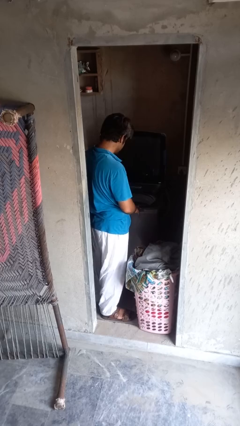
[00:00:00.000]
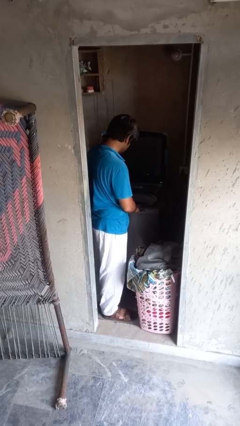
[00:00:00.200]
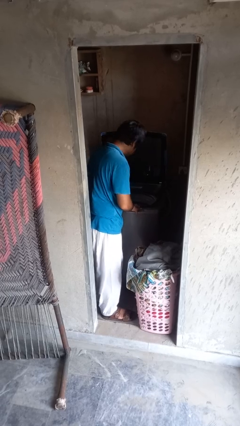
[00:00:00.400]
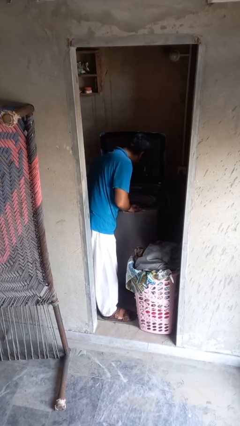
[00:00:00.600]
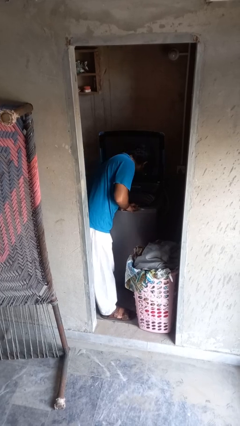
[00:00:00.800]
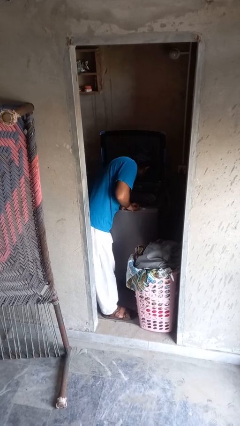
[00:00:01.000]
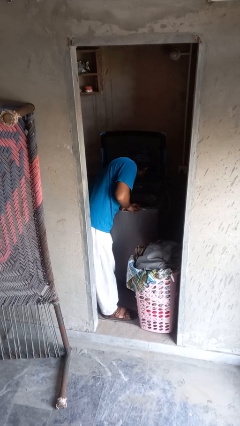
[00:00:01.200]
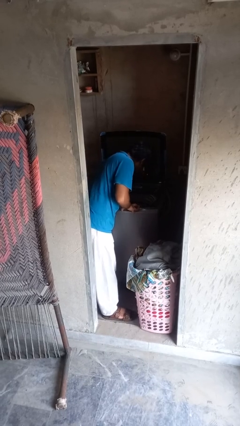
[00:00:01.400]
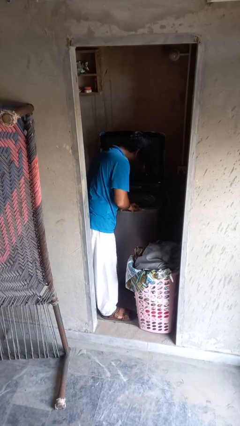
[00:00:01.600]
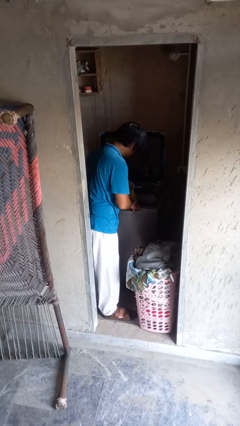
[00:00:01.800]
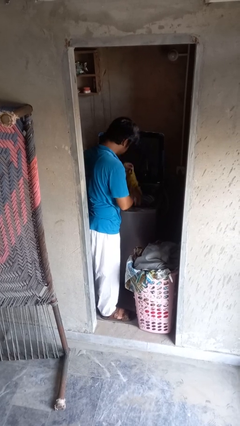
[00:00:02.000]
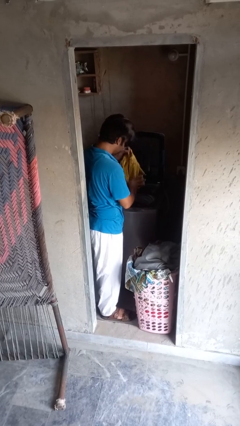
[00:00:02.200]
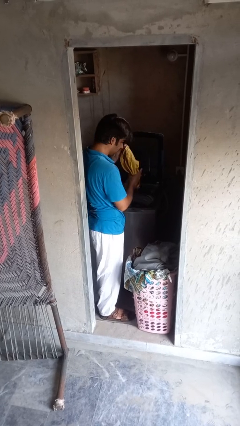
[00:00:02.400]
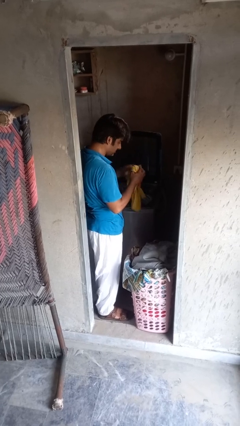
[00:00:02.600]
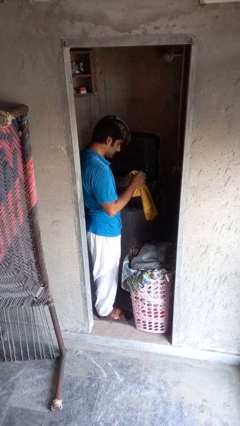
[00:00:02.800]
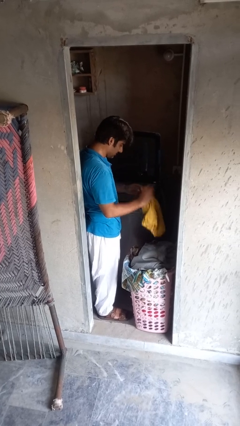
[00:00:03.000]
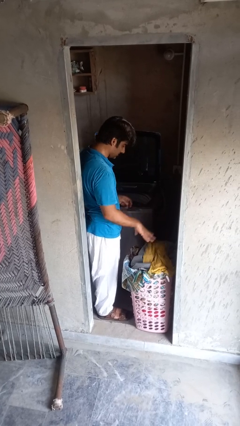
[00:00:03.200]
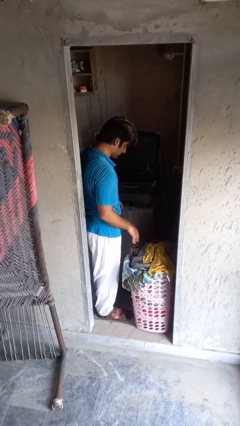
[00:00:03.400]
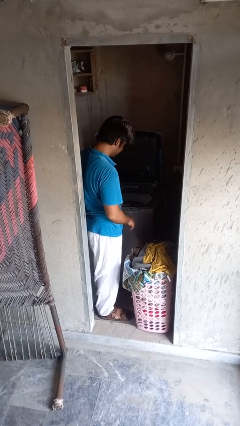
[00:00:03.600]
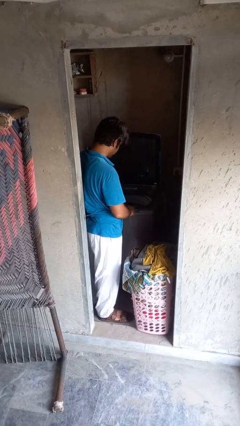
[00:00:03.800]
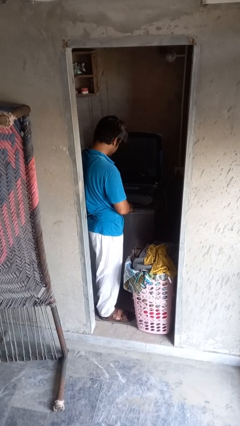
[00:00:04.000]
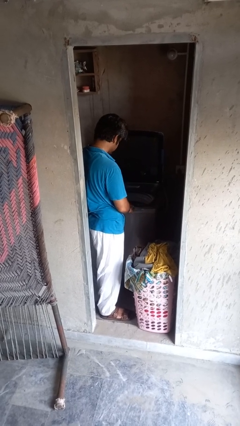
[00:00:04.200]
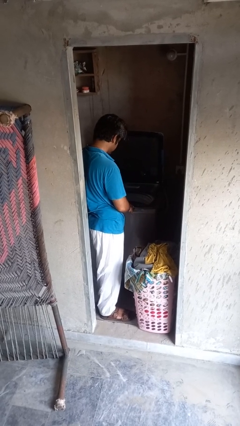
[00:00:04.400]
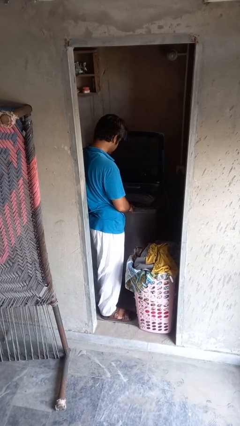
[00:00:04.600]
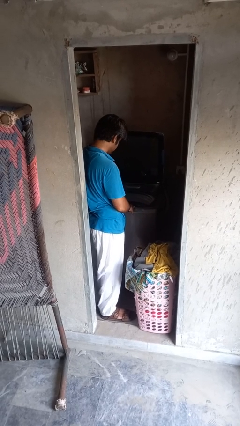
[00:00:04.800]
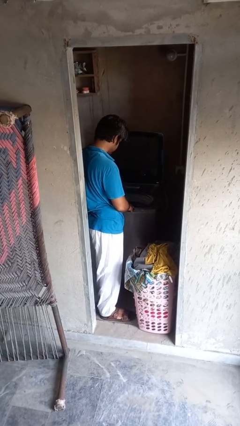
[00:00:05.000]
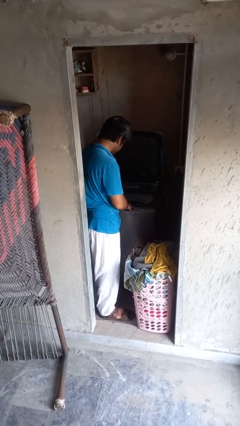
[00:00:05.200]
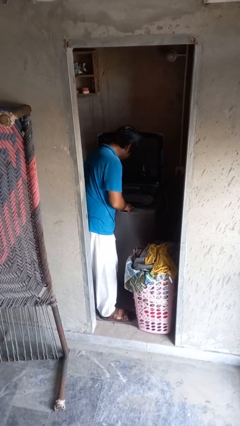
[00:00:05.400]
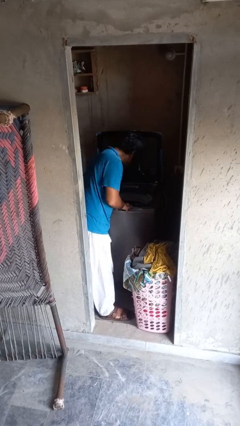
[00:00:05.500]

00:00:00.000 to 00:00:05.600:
person loads clotheswasher

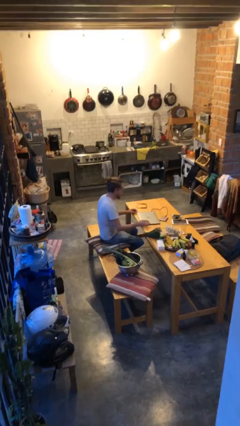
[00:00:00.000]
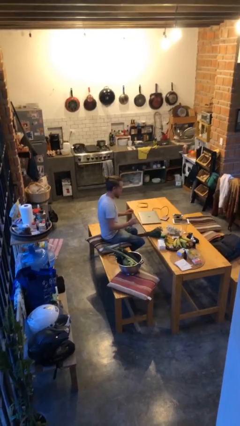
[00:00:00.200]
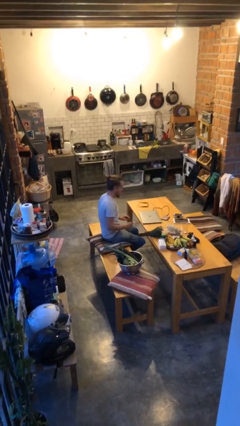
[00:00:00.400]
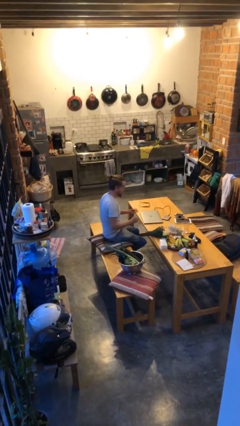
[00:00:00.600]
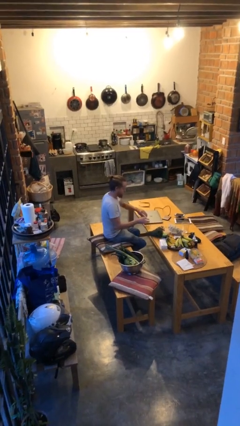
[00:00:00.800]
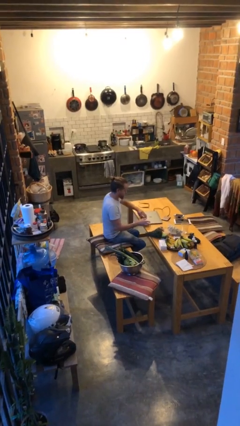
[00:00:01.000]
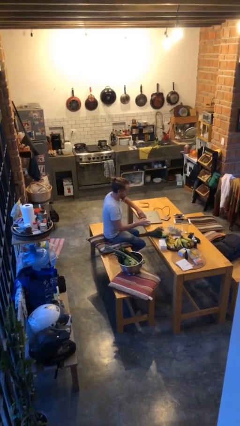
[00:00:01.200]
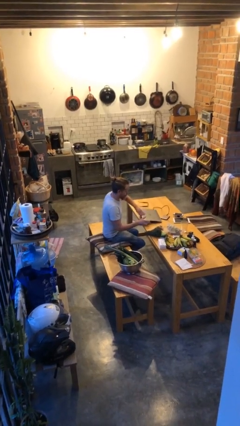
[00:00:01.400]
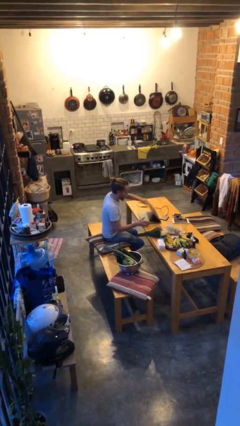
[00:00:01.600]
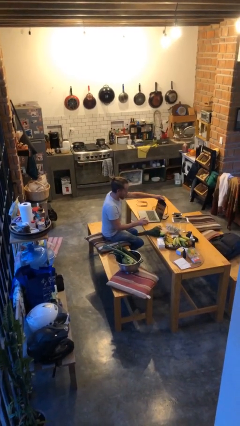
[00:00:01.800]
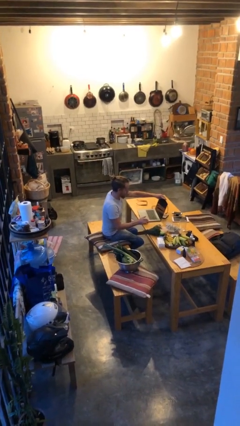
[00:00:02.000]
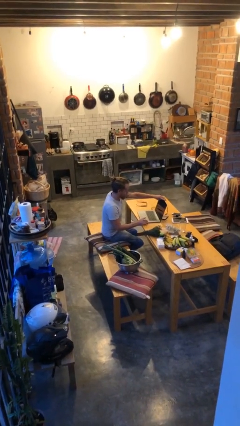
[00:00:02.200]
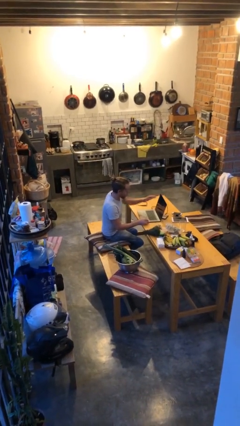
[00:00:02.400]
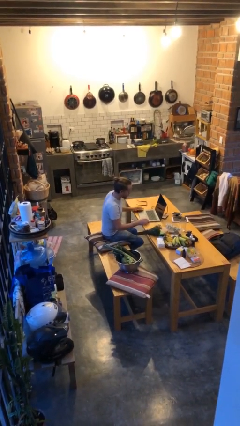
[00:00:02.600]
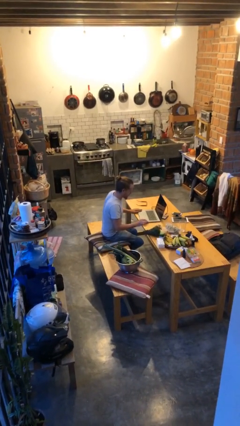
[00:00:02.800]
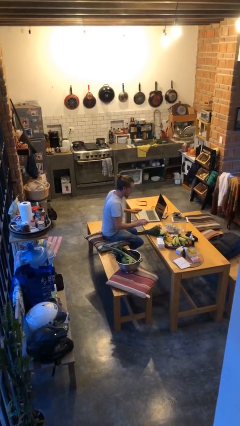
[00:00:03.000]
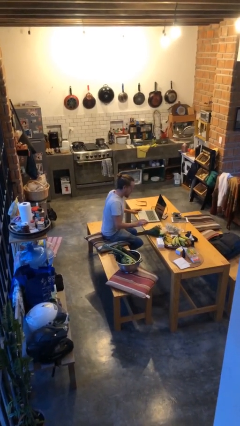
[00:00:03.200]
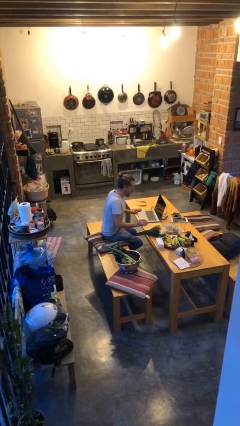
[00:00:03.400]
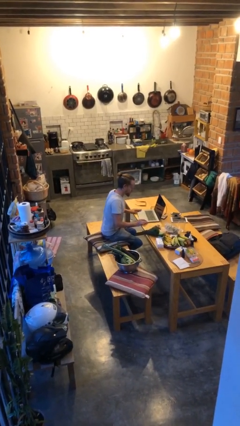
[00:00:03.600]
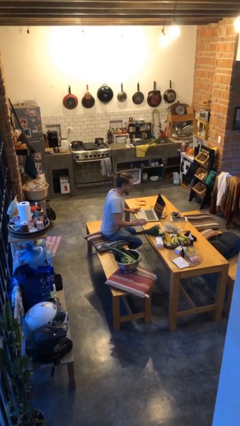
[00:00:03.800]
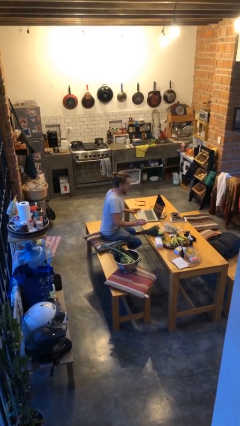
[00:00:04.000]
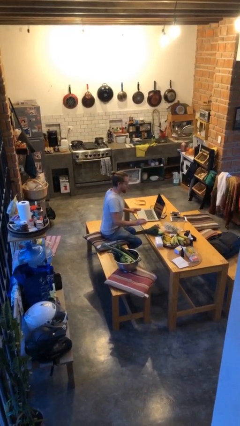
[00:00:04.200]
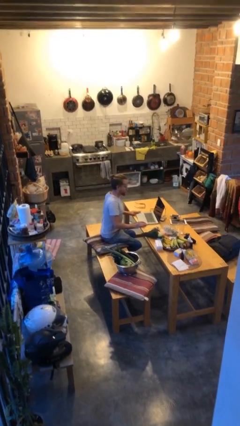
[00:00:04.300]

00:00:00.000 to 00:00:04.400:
person opens laptop

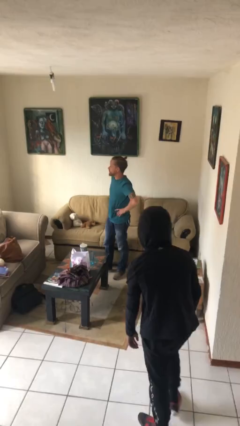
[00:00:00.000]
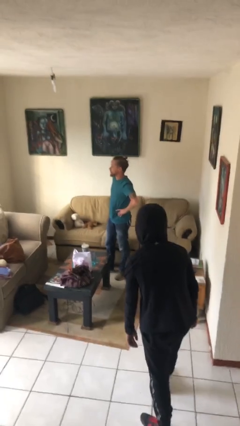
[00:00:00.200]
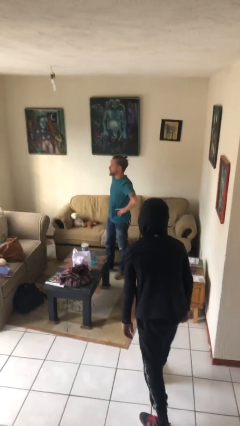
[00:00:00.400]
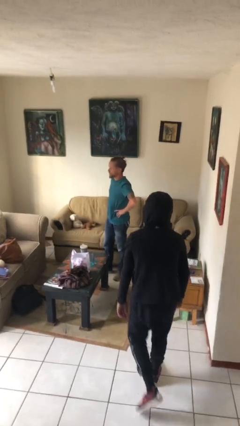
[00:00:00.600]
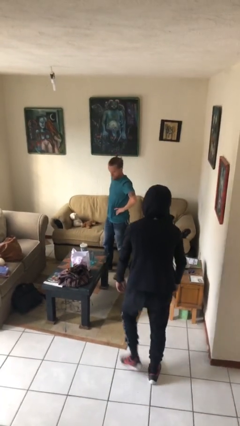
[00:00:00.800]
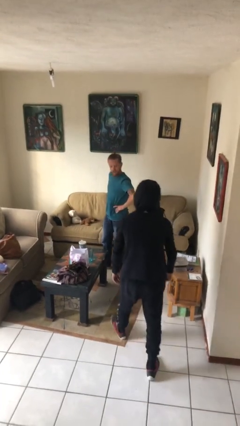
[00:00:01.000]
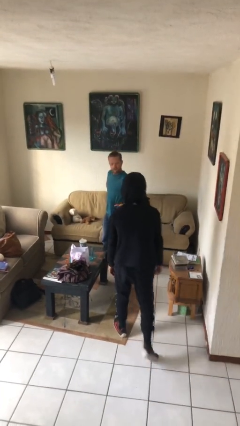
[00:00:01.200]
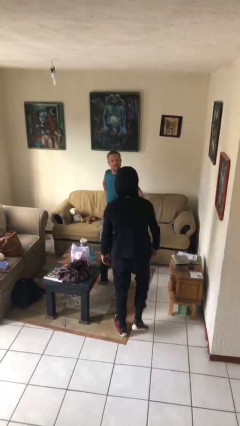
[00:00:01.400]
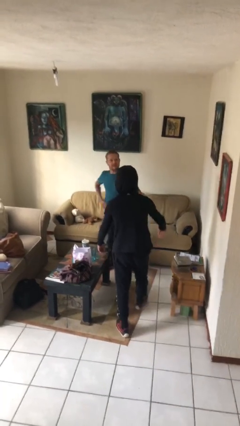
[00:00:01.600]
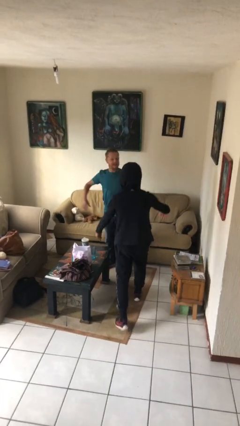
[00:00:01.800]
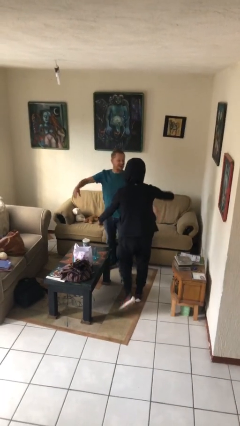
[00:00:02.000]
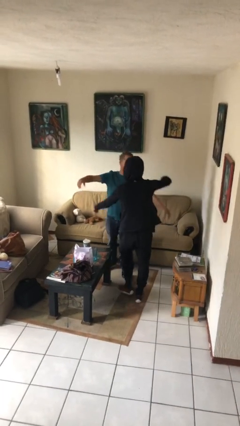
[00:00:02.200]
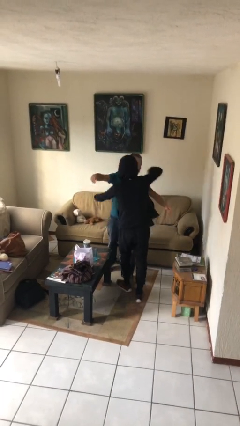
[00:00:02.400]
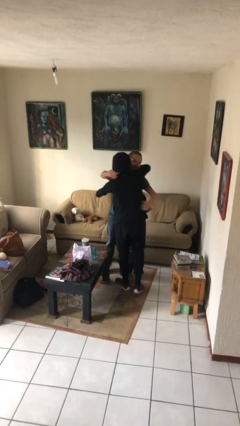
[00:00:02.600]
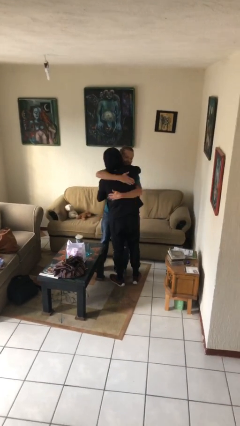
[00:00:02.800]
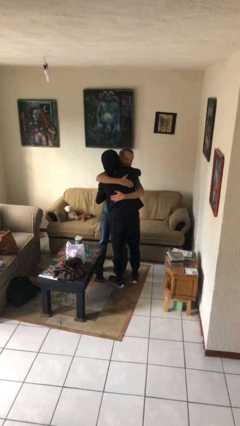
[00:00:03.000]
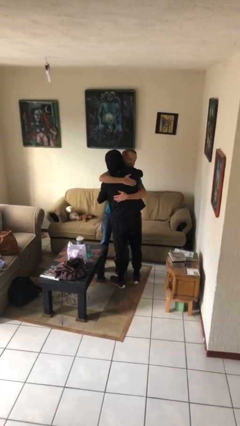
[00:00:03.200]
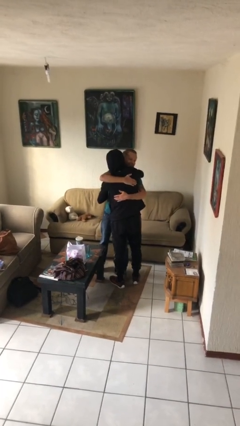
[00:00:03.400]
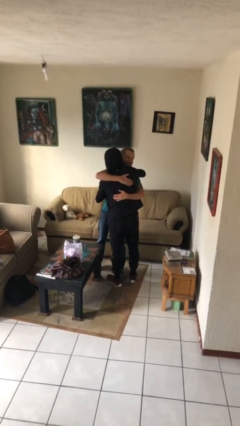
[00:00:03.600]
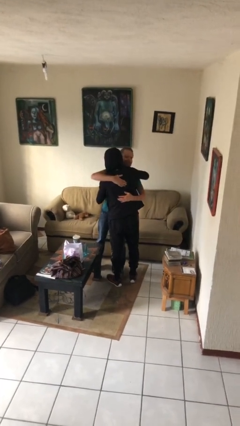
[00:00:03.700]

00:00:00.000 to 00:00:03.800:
person embraces person

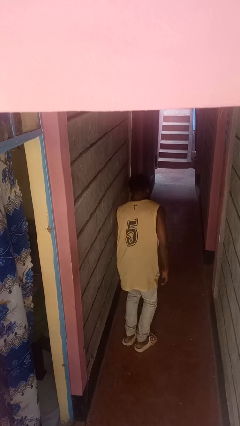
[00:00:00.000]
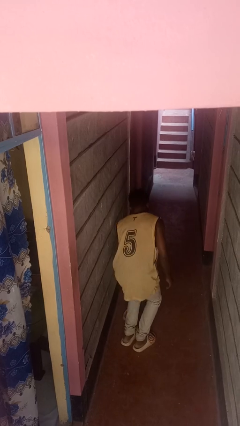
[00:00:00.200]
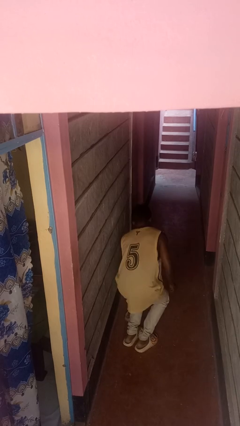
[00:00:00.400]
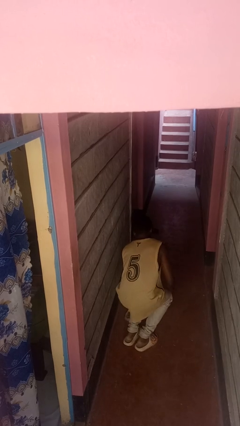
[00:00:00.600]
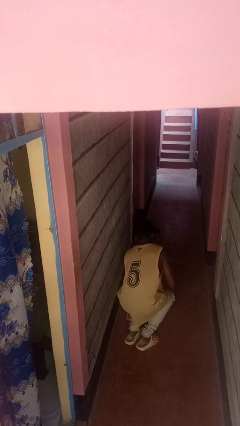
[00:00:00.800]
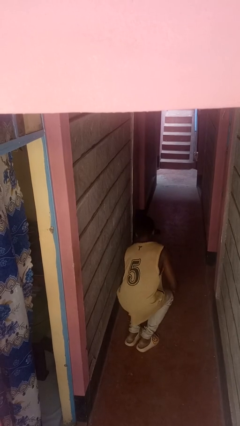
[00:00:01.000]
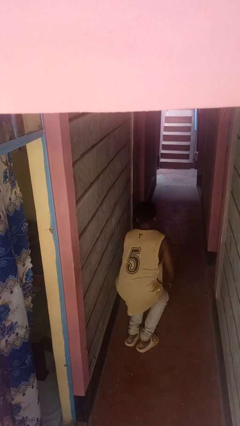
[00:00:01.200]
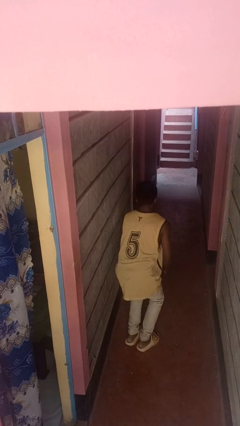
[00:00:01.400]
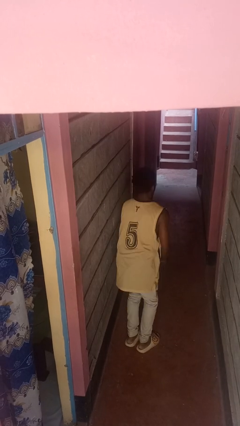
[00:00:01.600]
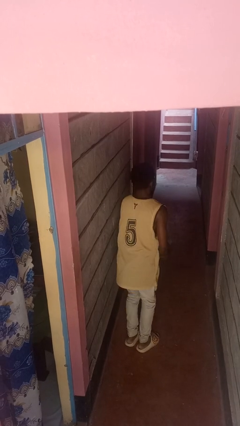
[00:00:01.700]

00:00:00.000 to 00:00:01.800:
person picks up object from floor

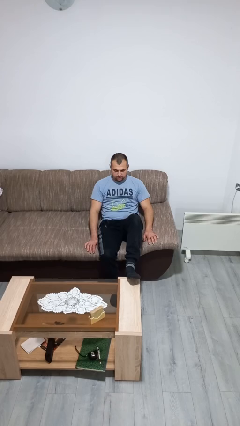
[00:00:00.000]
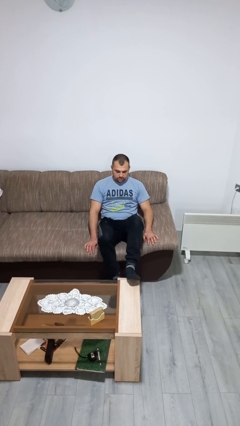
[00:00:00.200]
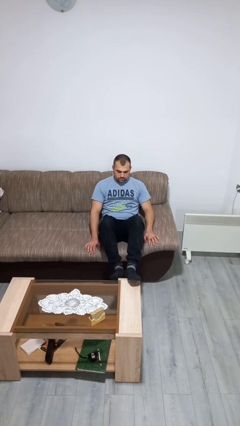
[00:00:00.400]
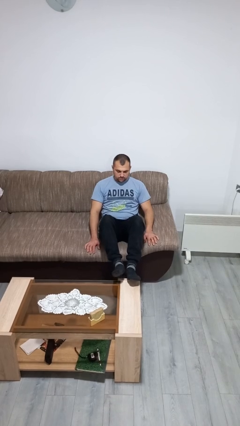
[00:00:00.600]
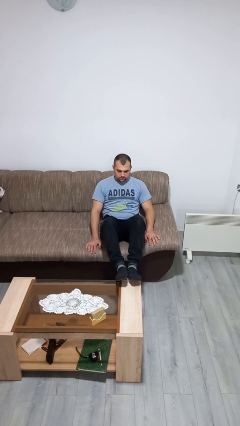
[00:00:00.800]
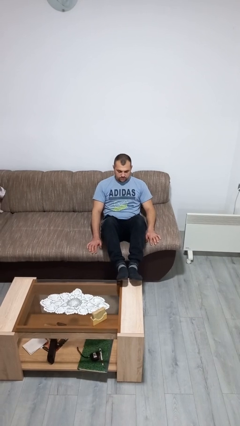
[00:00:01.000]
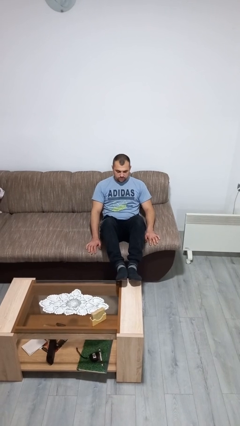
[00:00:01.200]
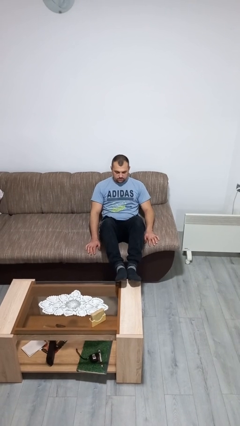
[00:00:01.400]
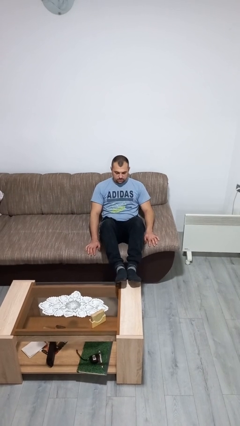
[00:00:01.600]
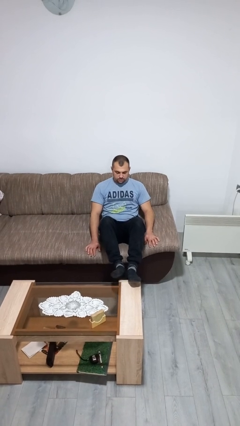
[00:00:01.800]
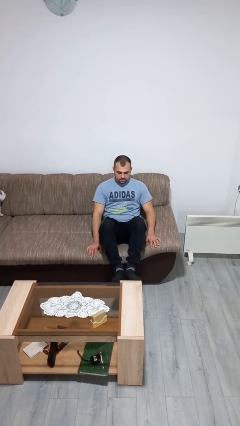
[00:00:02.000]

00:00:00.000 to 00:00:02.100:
person puts feet up
